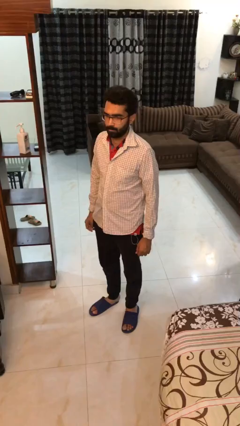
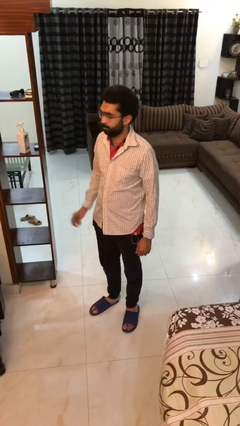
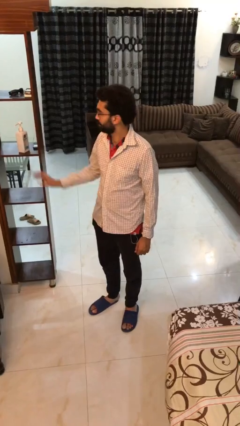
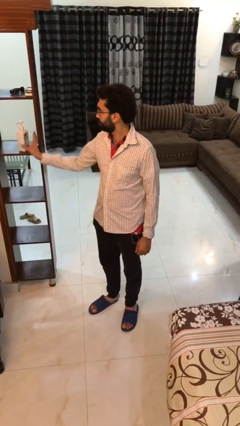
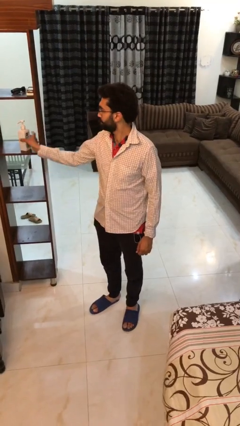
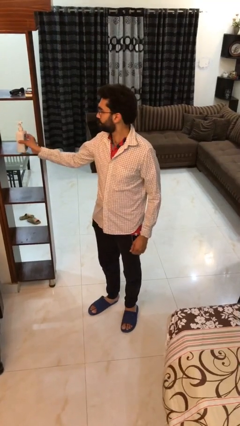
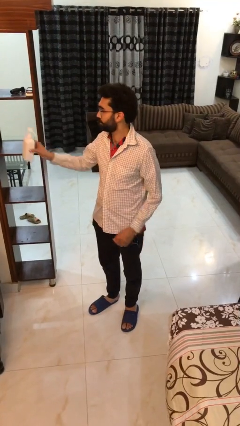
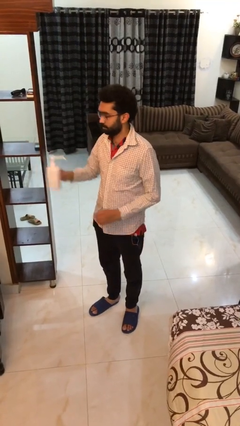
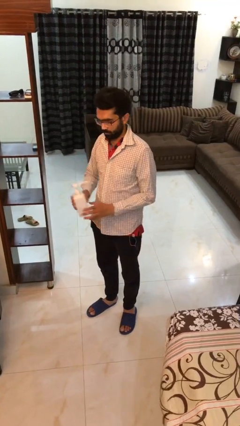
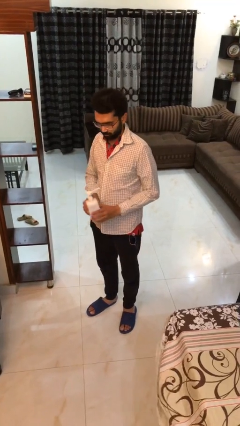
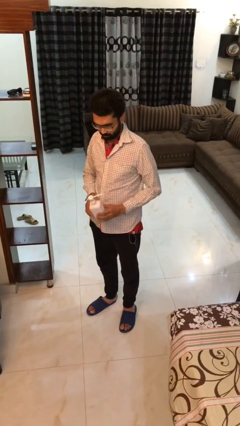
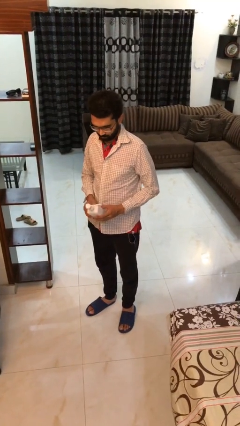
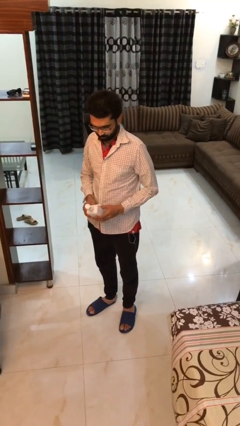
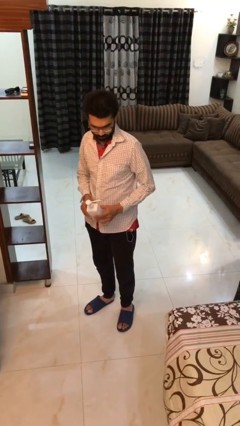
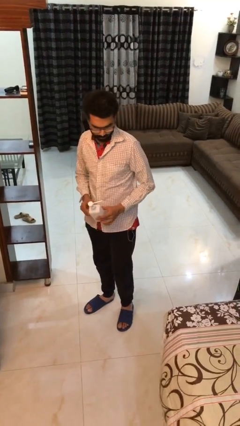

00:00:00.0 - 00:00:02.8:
person picks up object from shelf

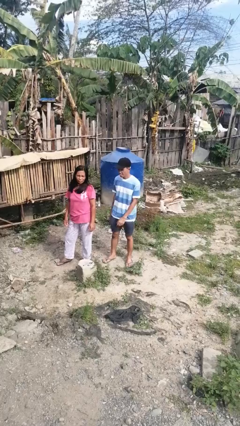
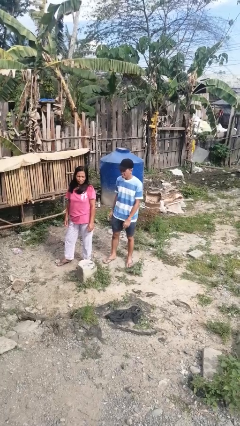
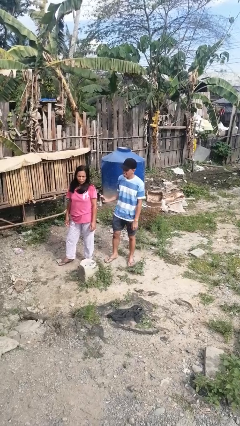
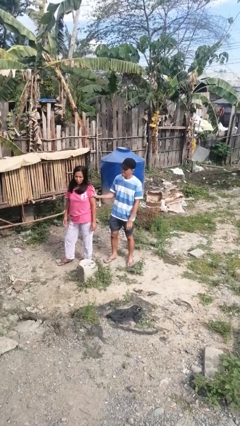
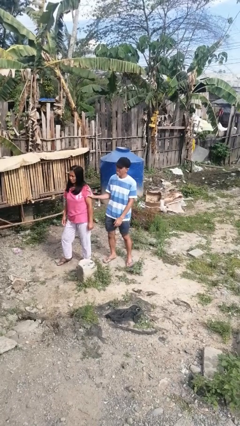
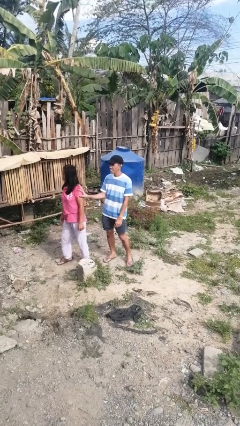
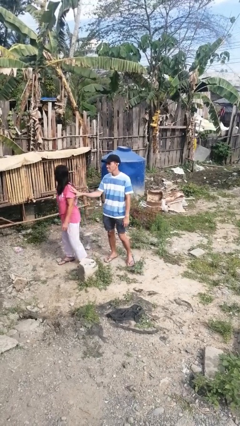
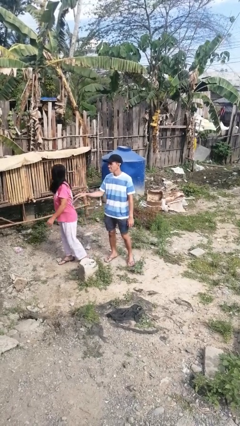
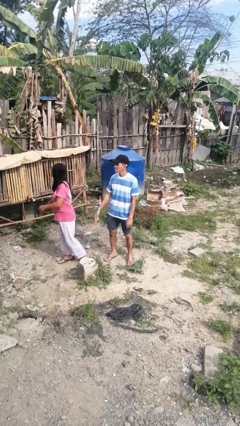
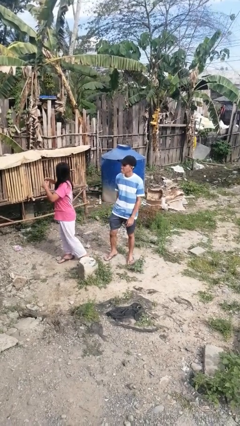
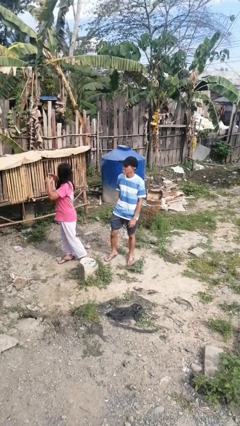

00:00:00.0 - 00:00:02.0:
person shoves person

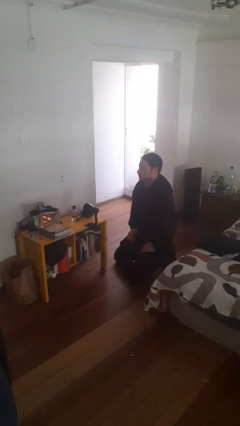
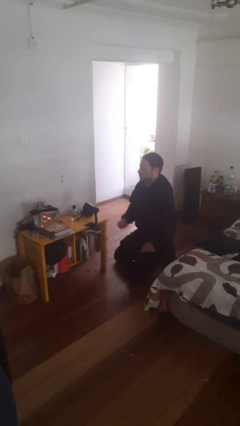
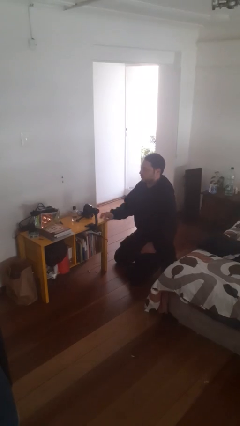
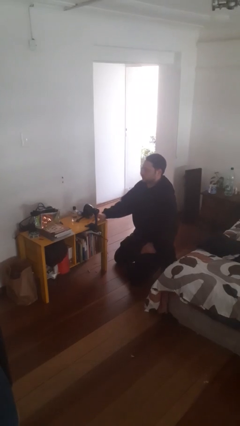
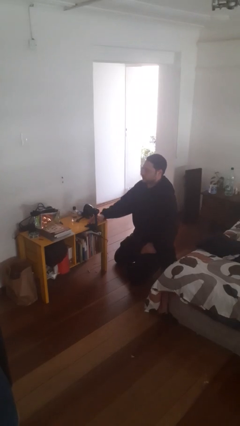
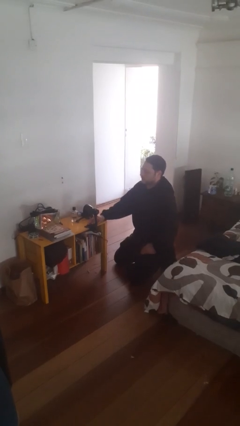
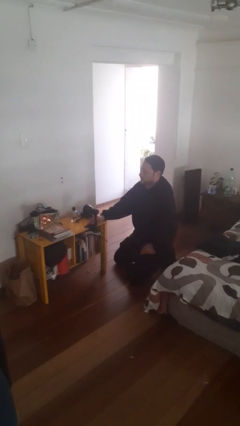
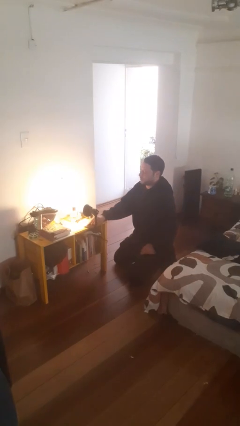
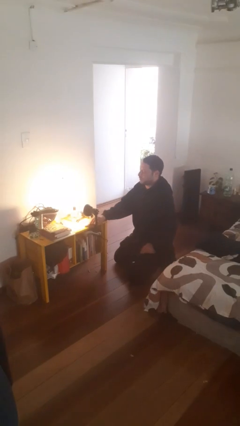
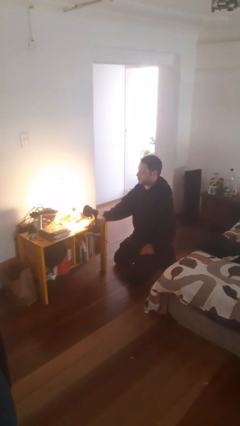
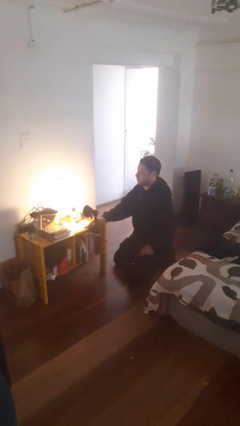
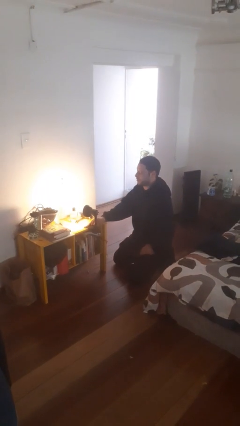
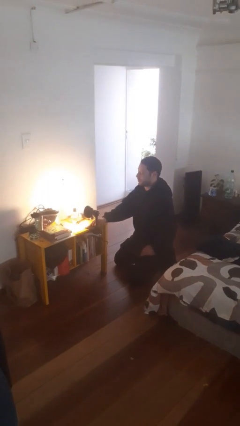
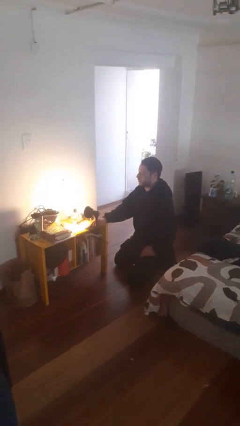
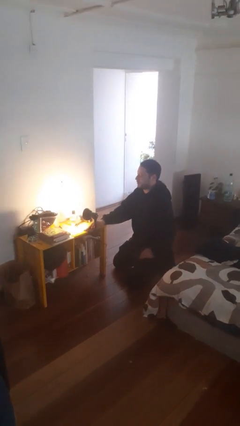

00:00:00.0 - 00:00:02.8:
person turns on lamp

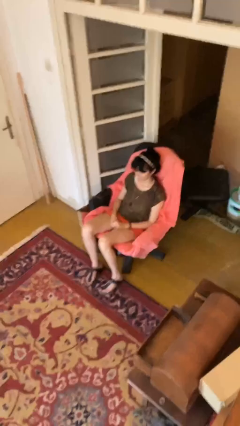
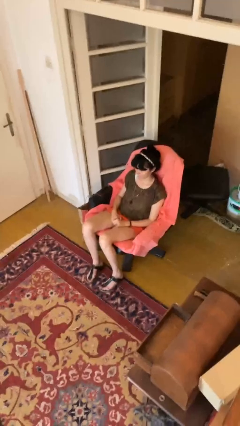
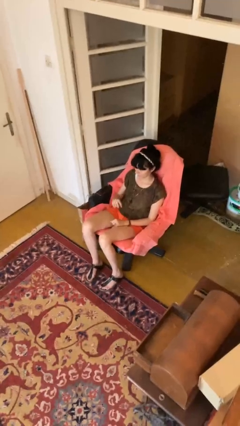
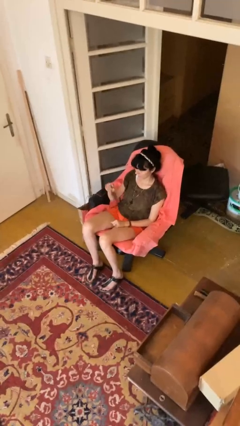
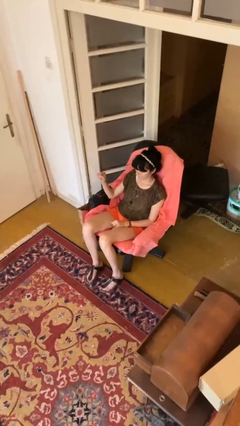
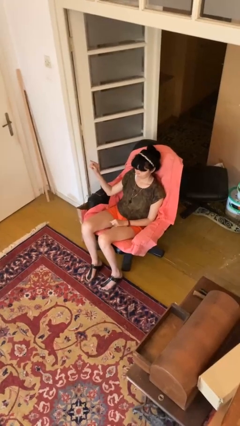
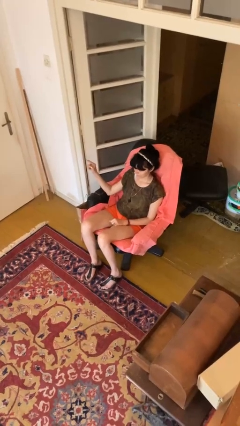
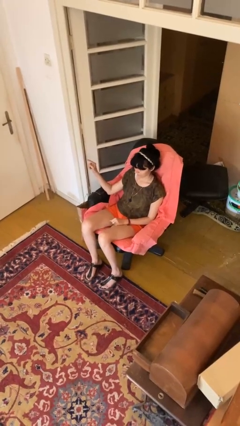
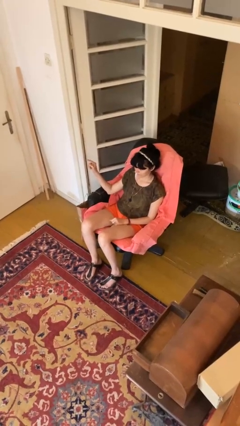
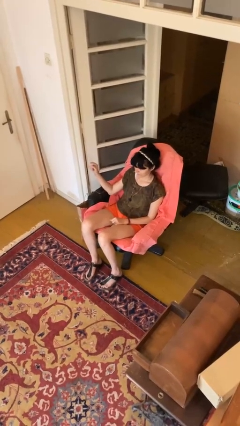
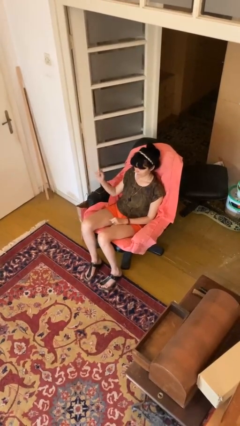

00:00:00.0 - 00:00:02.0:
person gestures swipe right

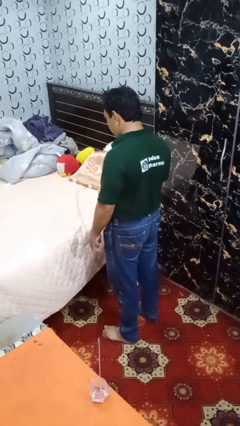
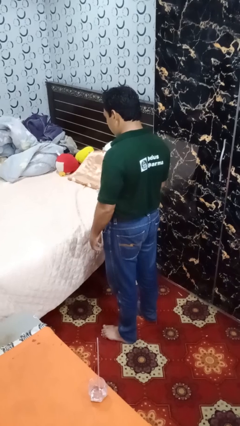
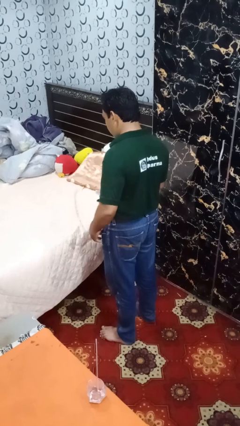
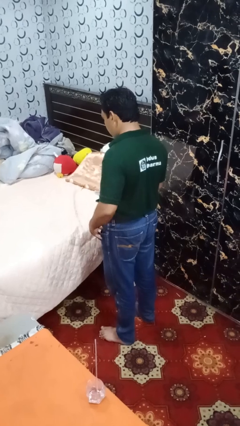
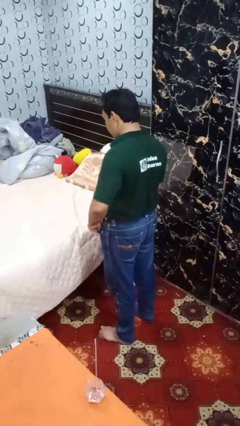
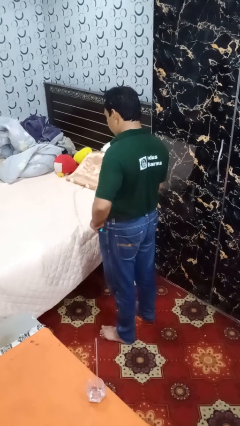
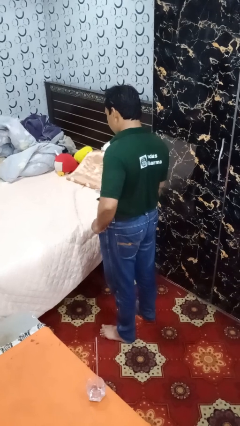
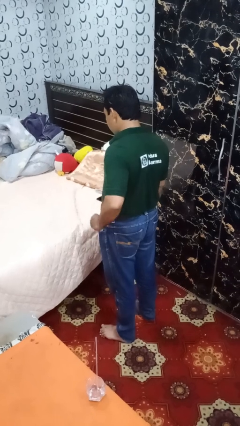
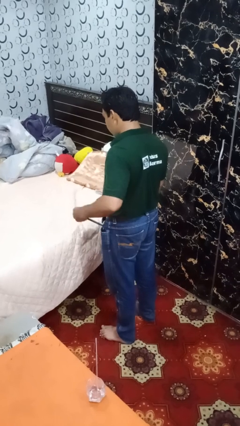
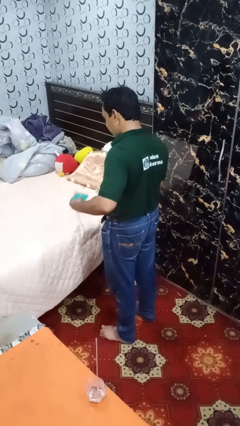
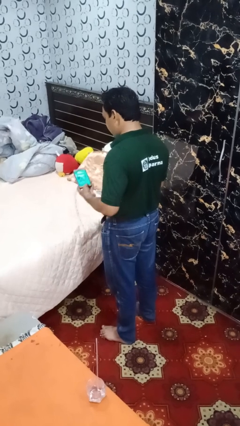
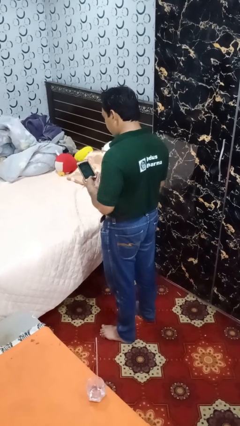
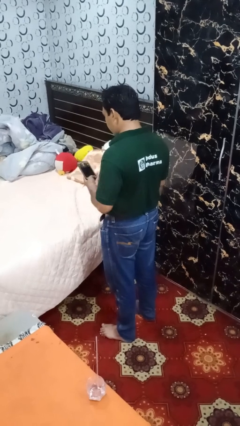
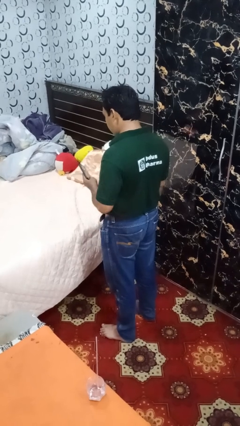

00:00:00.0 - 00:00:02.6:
person takes phone from pocket

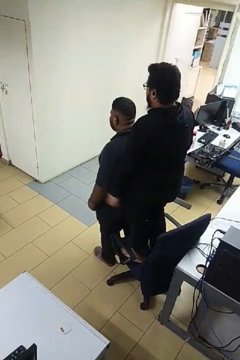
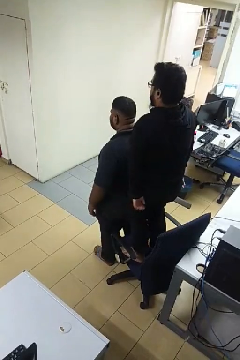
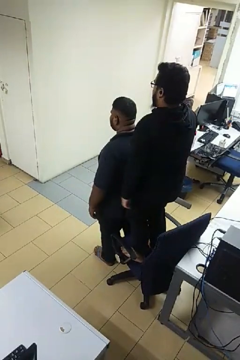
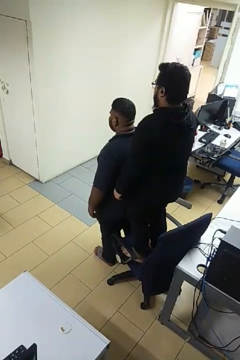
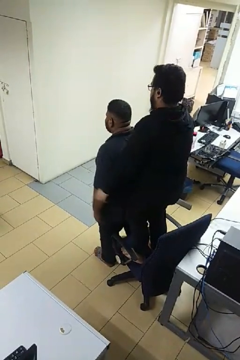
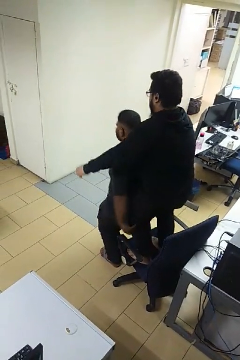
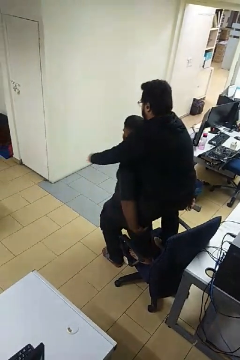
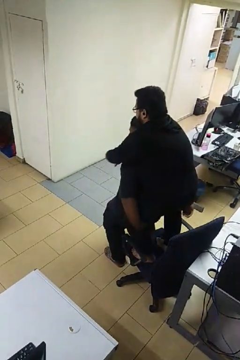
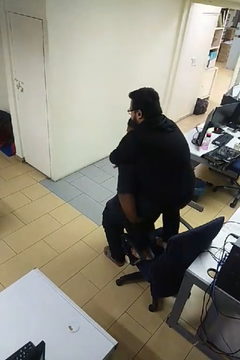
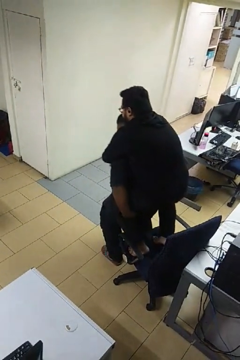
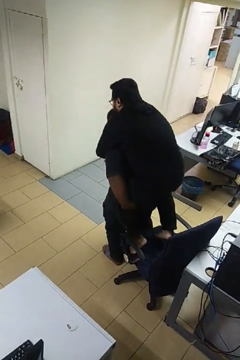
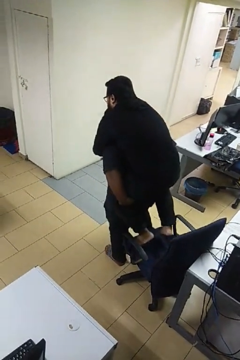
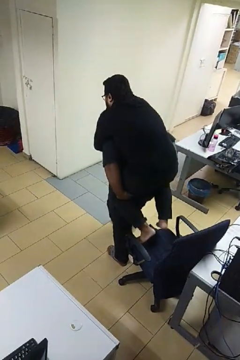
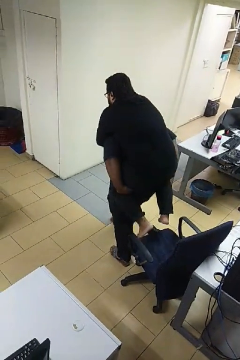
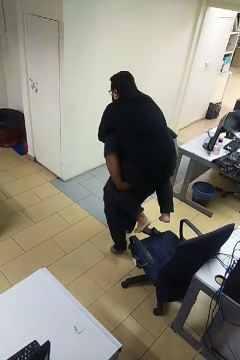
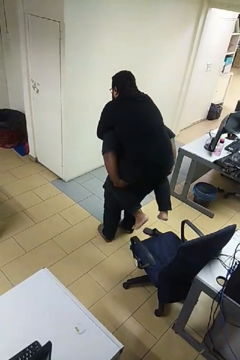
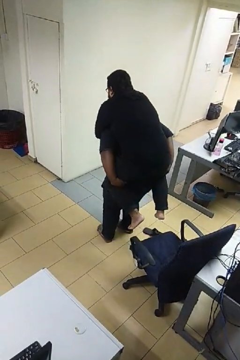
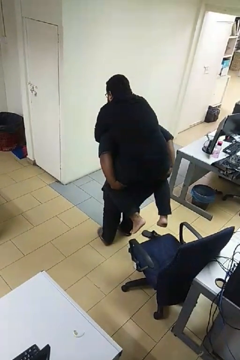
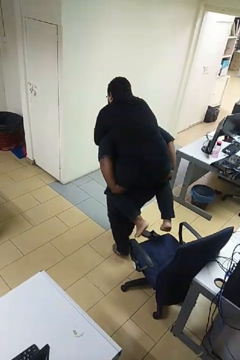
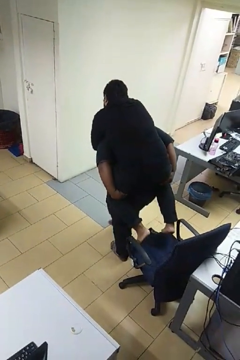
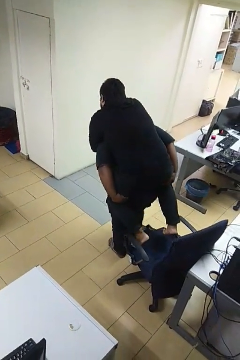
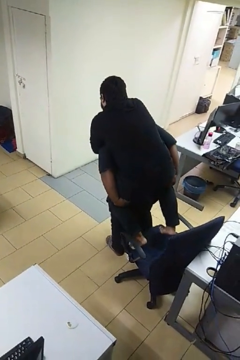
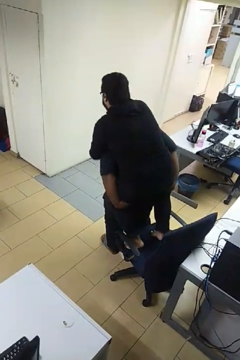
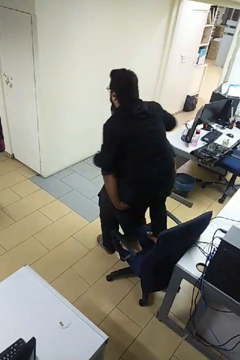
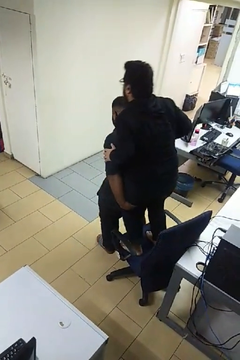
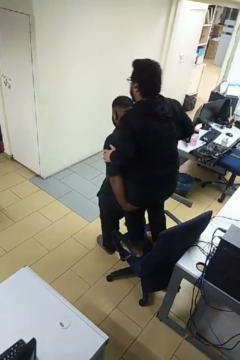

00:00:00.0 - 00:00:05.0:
person carries person on back

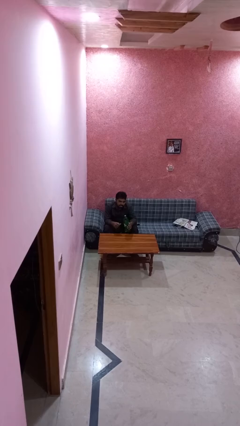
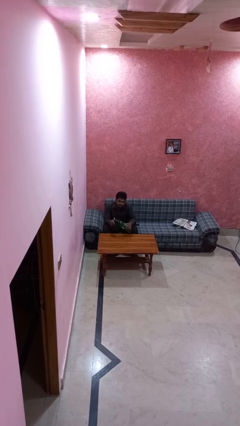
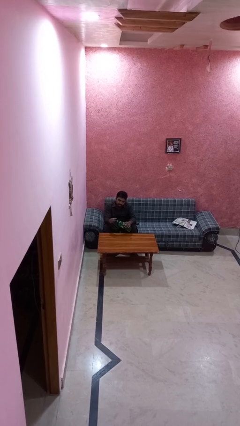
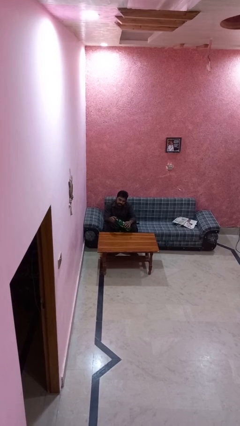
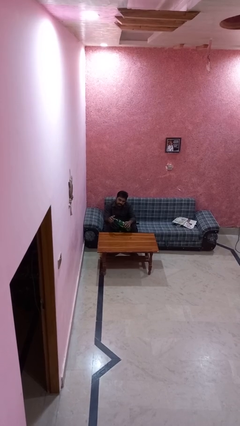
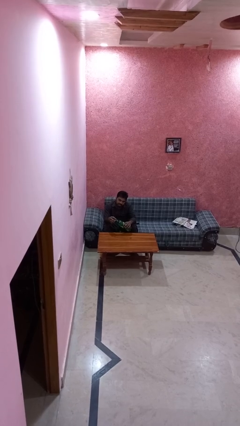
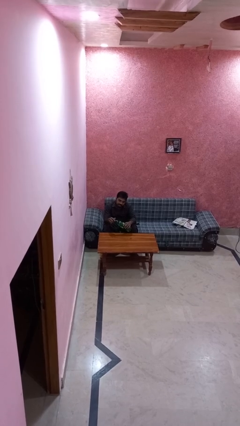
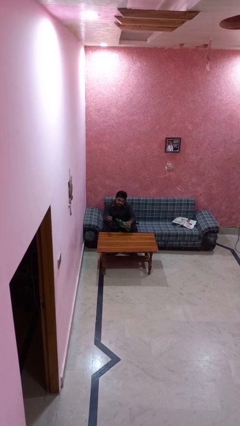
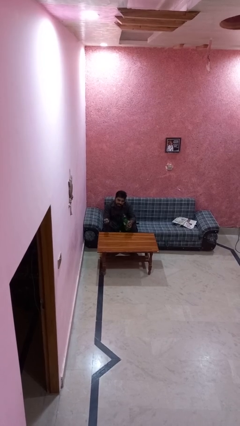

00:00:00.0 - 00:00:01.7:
person unscrews lid from bottle
